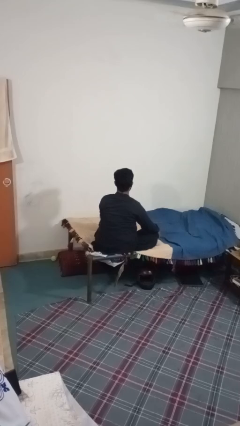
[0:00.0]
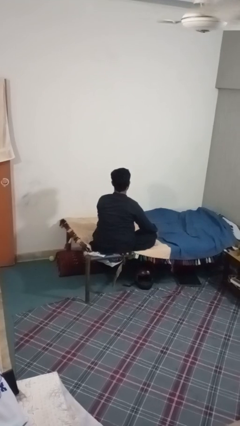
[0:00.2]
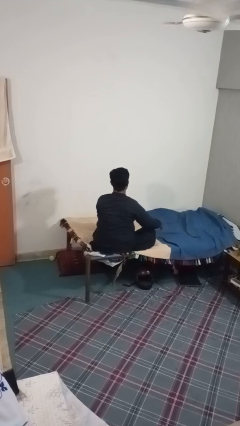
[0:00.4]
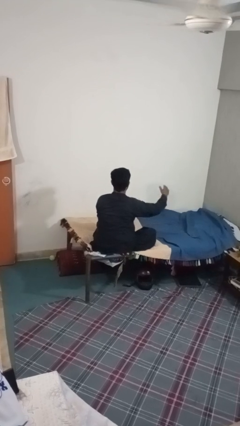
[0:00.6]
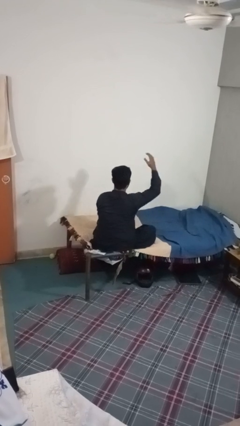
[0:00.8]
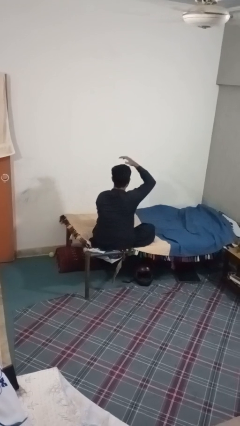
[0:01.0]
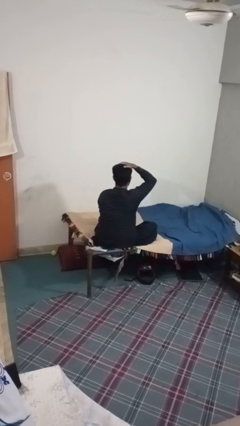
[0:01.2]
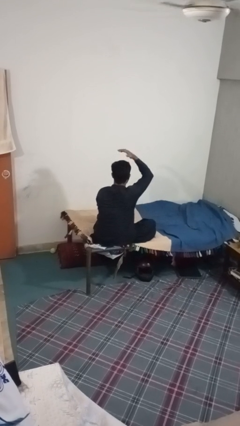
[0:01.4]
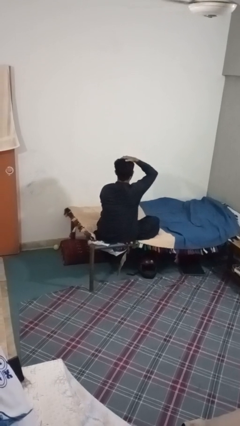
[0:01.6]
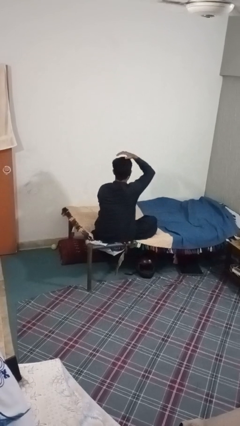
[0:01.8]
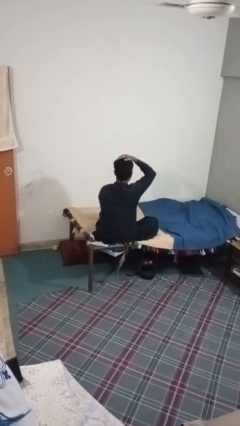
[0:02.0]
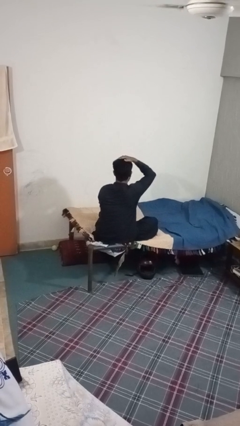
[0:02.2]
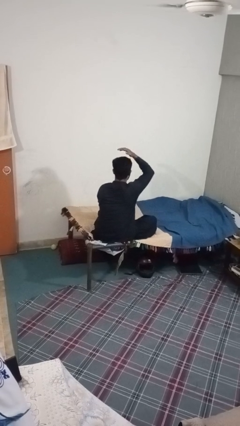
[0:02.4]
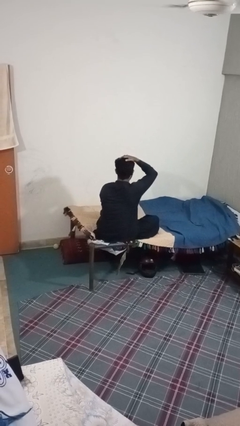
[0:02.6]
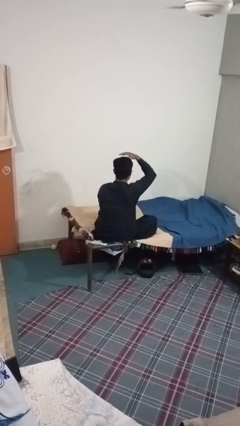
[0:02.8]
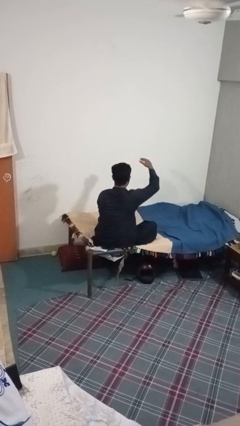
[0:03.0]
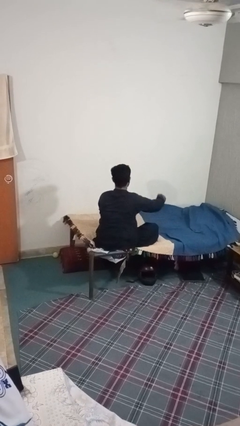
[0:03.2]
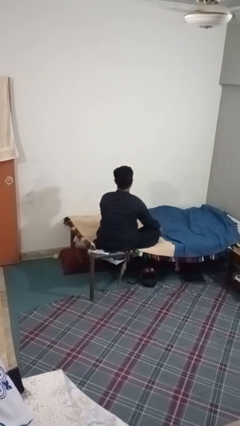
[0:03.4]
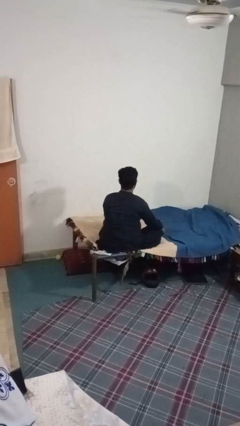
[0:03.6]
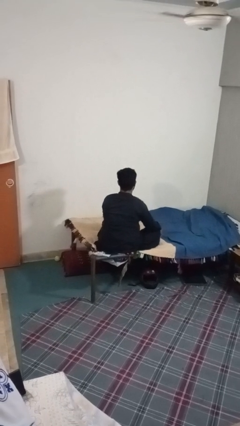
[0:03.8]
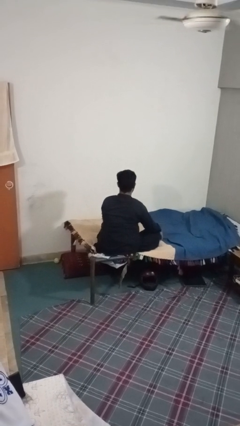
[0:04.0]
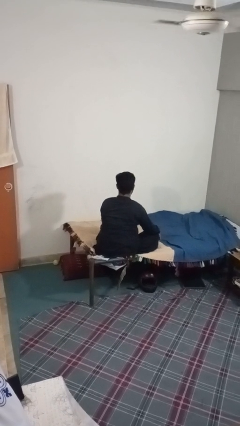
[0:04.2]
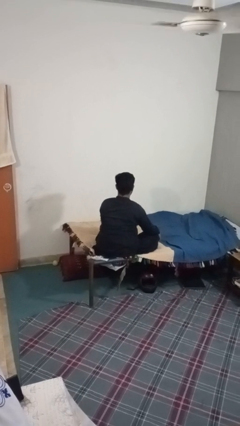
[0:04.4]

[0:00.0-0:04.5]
person pats head

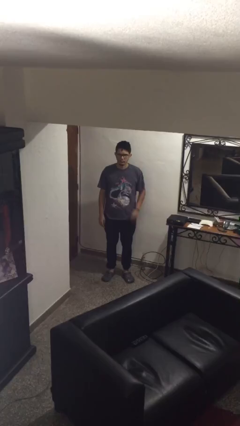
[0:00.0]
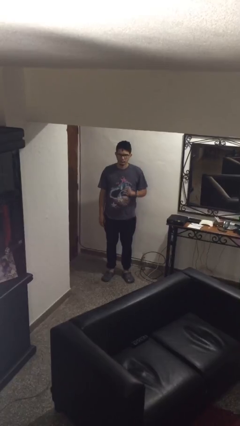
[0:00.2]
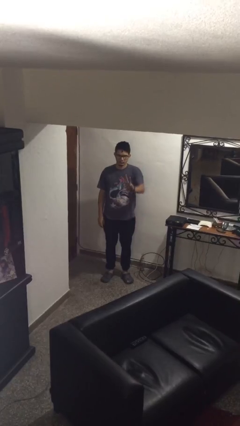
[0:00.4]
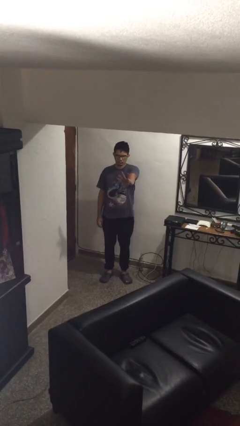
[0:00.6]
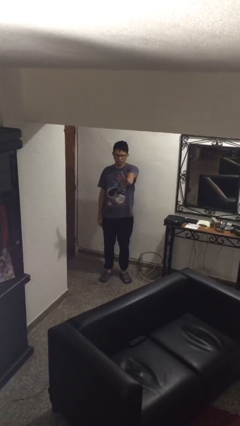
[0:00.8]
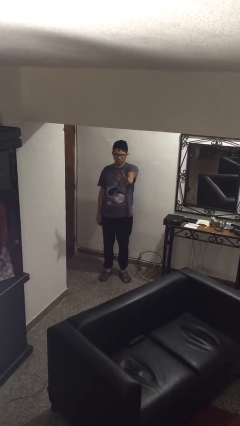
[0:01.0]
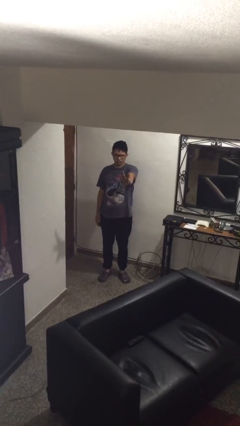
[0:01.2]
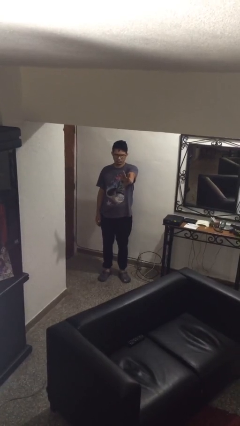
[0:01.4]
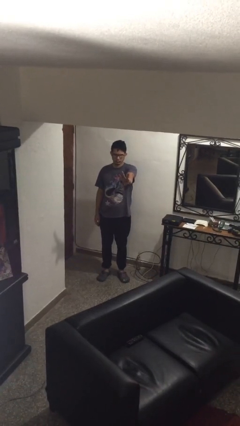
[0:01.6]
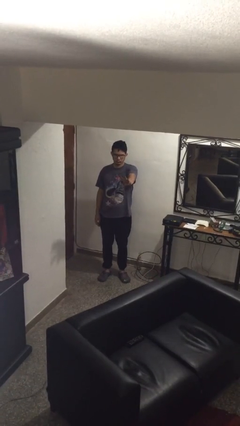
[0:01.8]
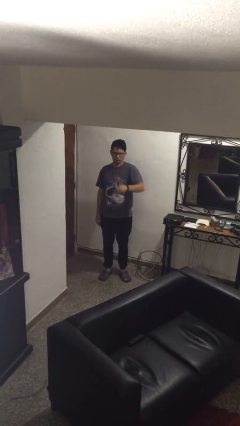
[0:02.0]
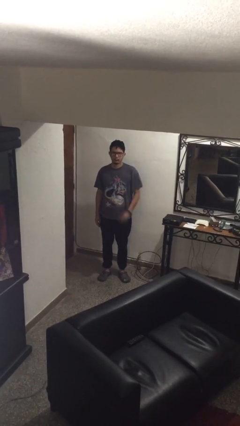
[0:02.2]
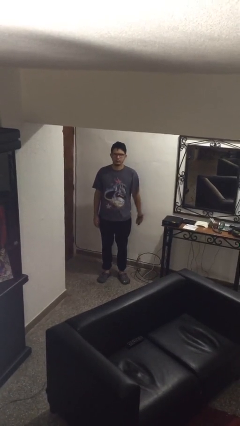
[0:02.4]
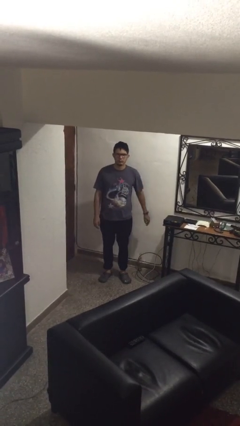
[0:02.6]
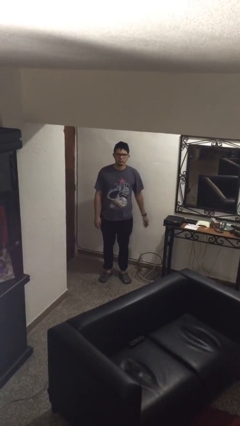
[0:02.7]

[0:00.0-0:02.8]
person gestures number three

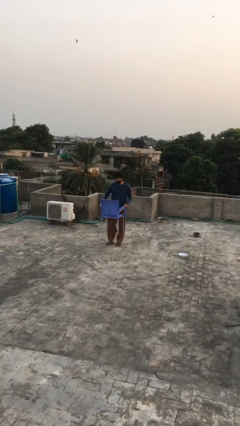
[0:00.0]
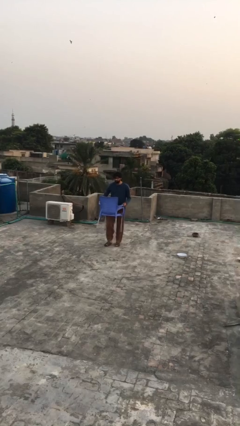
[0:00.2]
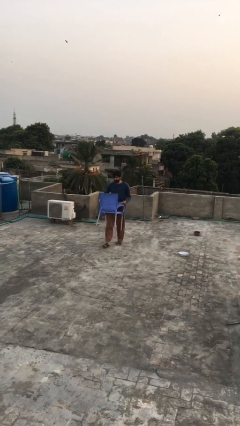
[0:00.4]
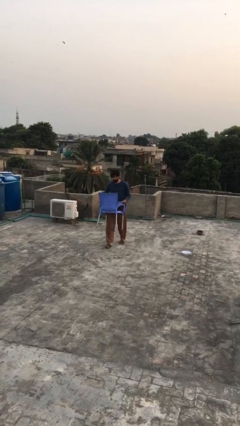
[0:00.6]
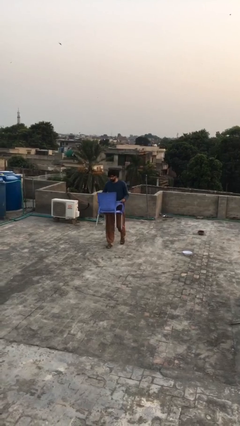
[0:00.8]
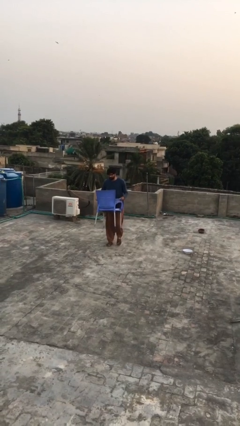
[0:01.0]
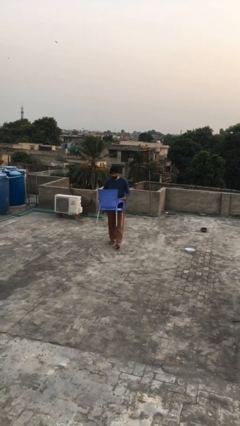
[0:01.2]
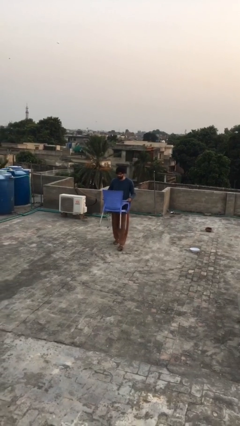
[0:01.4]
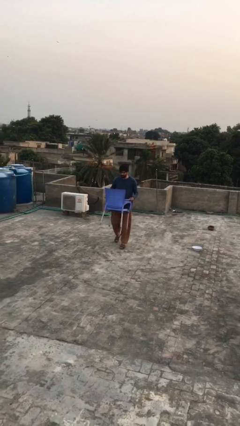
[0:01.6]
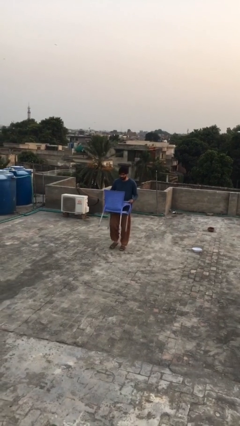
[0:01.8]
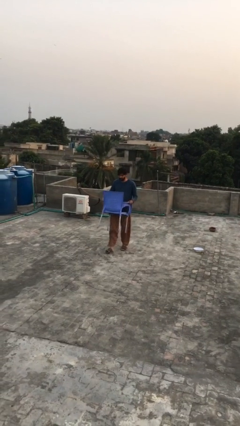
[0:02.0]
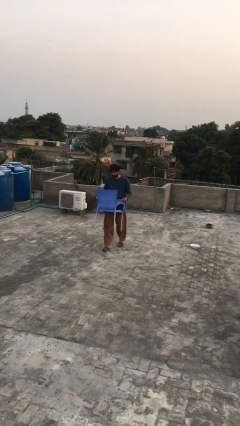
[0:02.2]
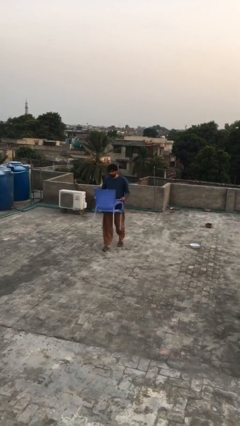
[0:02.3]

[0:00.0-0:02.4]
person carries heavy object

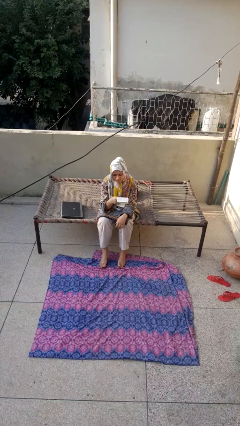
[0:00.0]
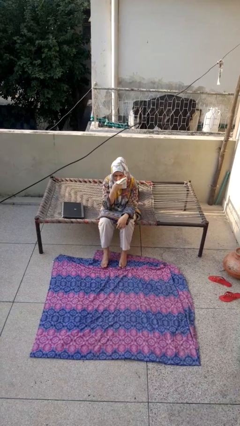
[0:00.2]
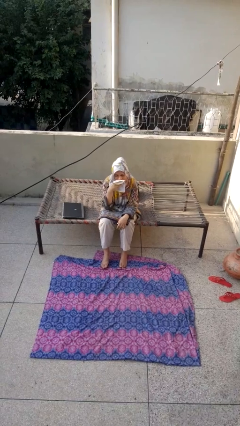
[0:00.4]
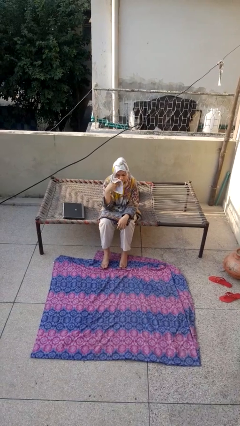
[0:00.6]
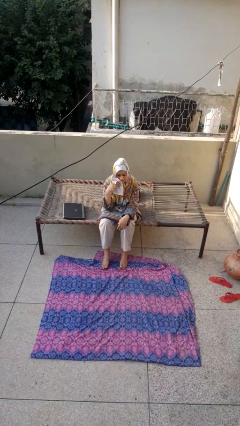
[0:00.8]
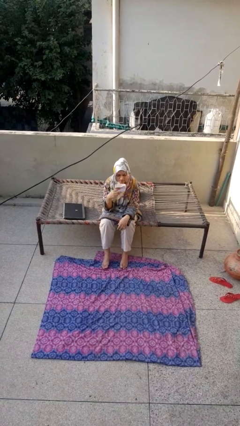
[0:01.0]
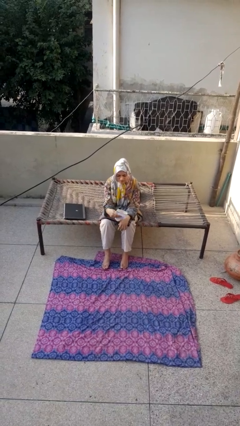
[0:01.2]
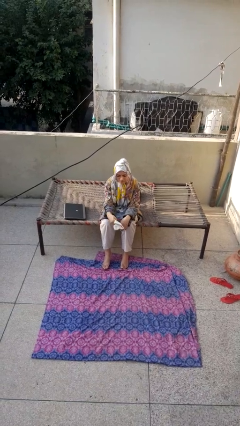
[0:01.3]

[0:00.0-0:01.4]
person wipes mouth with napkin

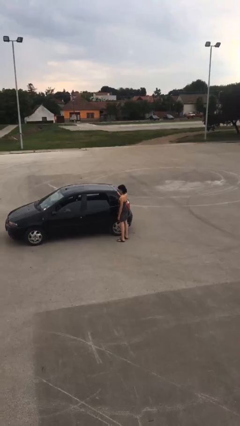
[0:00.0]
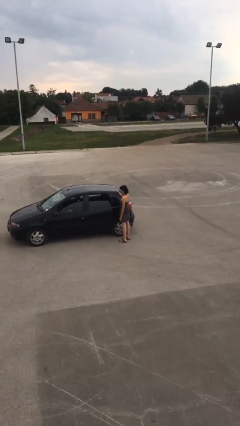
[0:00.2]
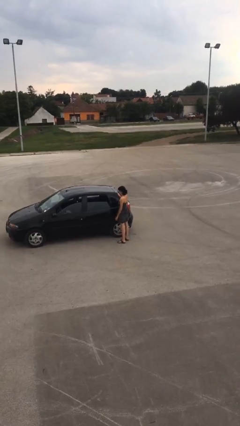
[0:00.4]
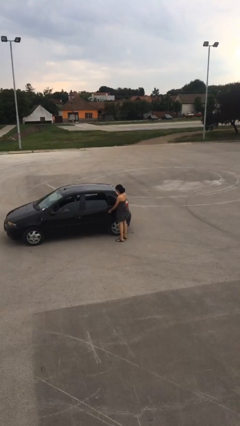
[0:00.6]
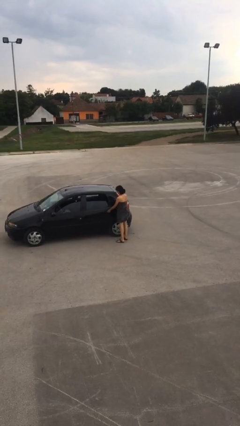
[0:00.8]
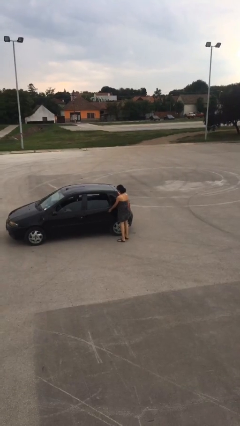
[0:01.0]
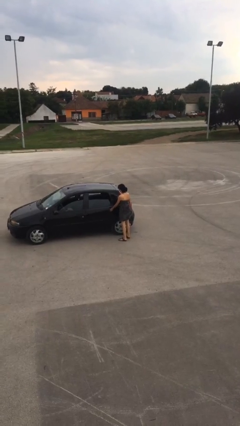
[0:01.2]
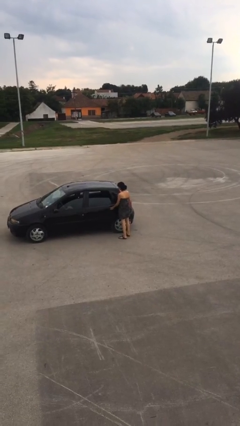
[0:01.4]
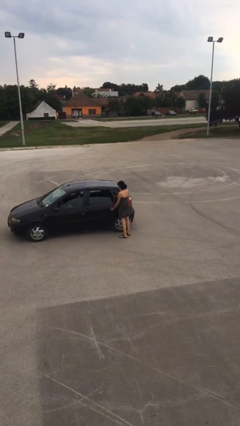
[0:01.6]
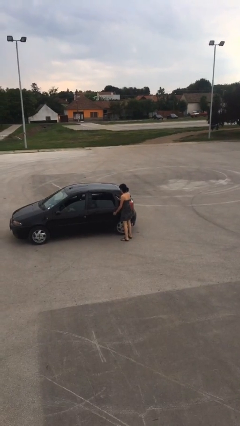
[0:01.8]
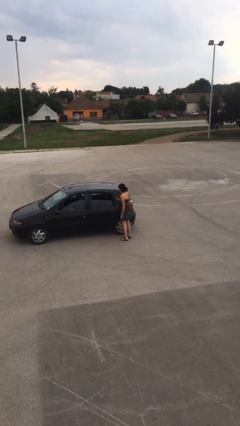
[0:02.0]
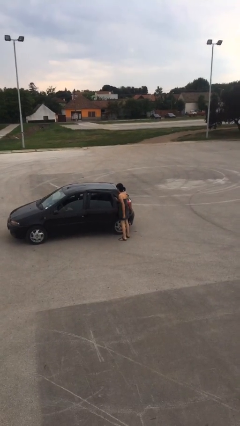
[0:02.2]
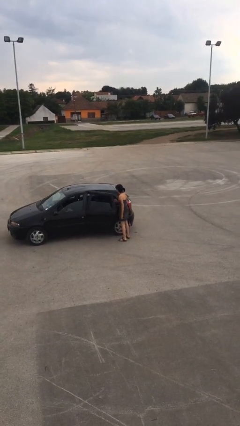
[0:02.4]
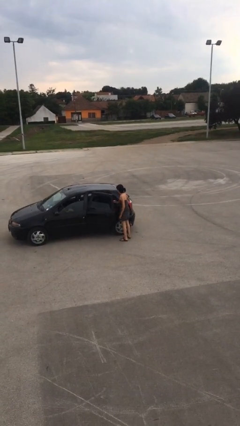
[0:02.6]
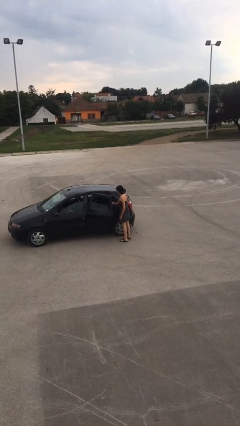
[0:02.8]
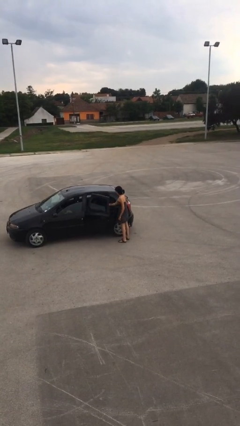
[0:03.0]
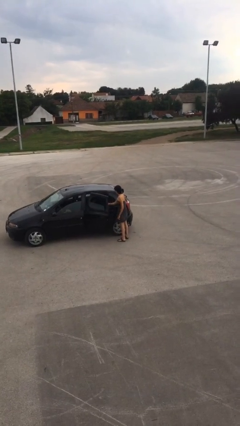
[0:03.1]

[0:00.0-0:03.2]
person opens car door

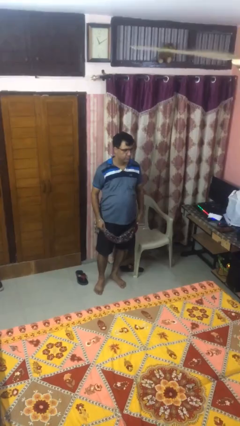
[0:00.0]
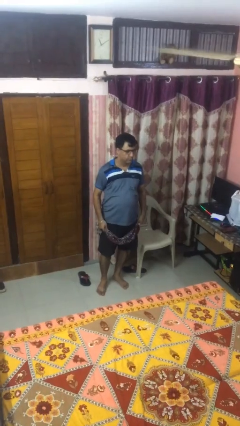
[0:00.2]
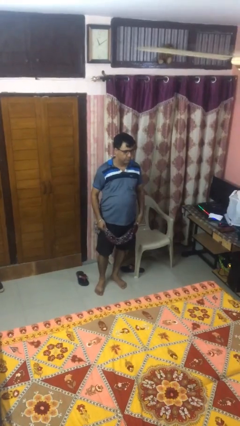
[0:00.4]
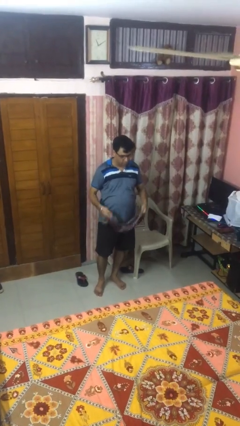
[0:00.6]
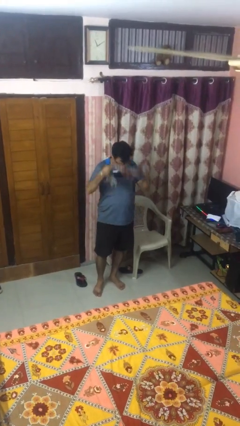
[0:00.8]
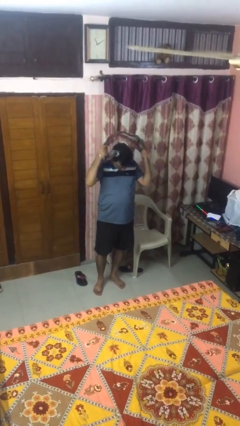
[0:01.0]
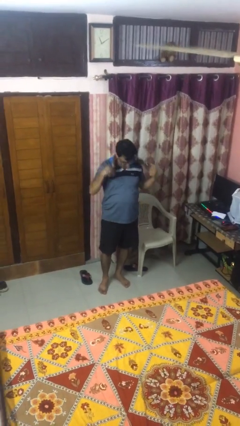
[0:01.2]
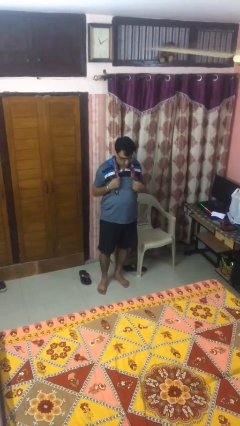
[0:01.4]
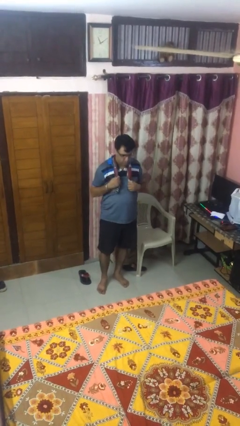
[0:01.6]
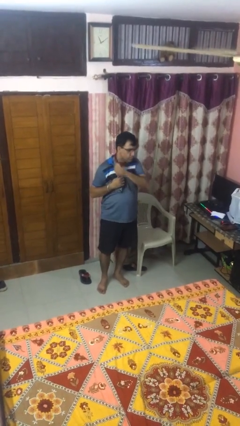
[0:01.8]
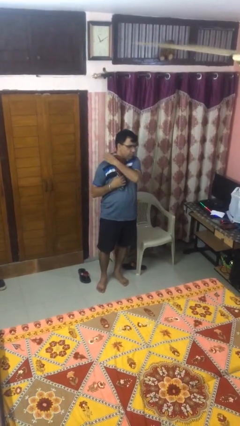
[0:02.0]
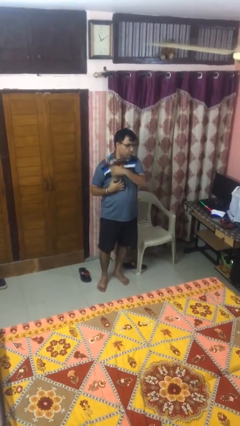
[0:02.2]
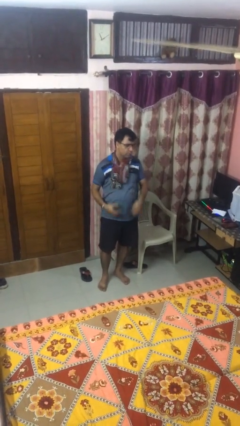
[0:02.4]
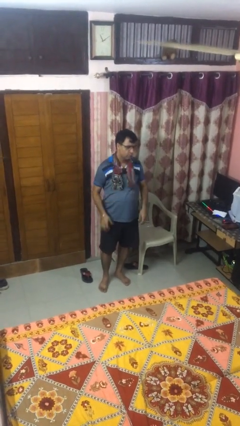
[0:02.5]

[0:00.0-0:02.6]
person puts on scarf

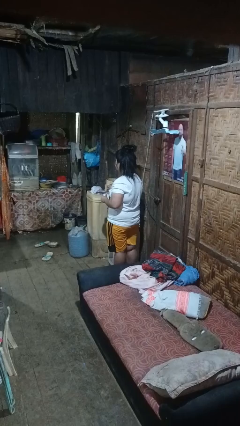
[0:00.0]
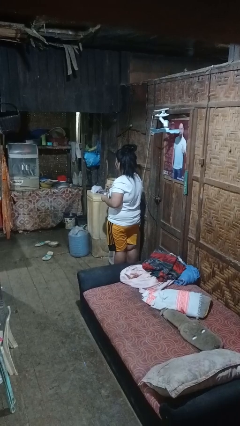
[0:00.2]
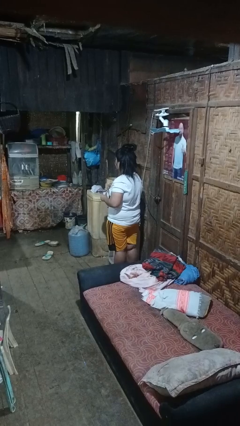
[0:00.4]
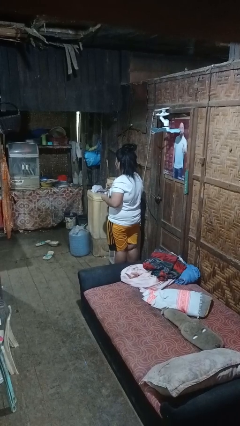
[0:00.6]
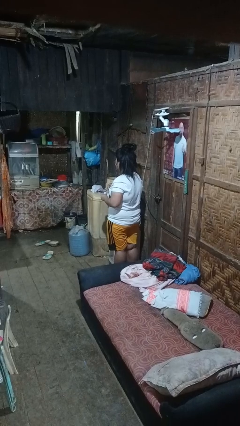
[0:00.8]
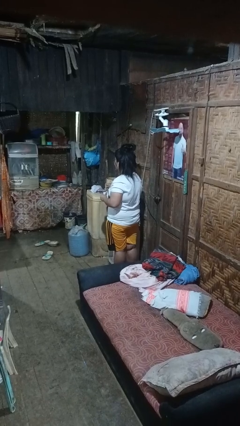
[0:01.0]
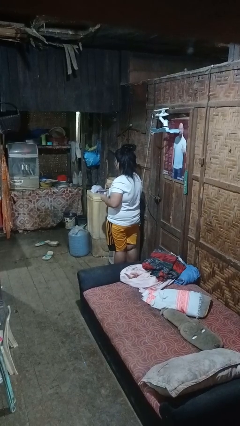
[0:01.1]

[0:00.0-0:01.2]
person stirs mug
